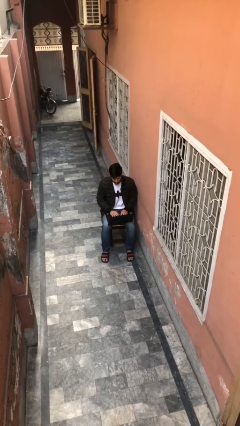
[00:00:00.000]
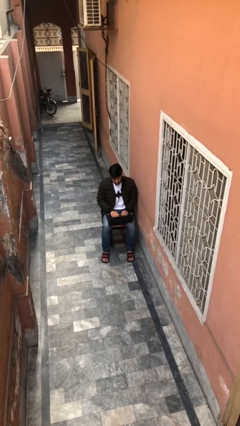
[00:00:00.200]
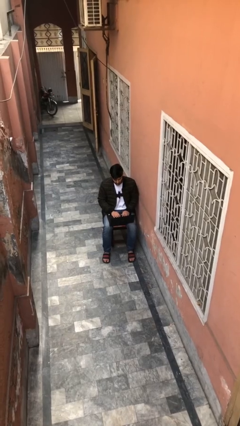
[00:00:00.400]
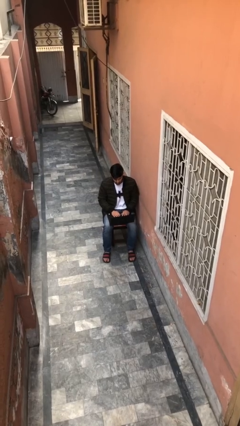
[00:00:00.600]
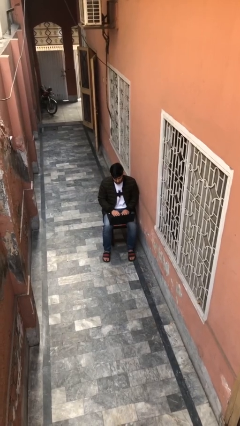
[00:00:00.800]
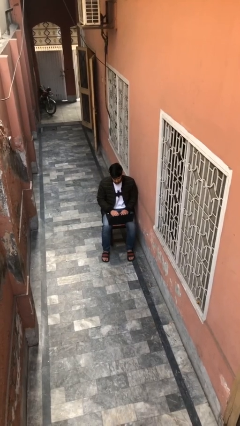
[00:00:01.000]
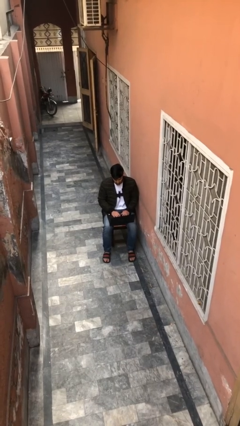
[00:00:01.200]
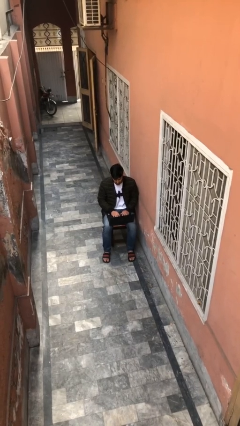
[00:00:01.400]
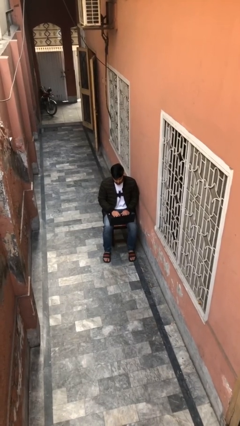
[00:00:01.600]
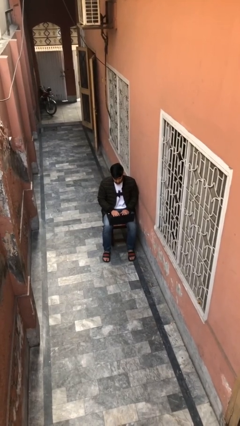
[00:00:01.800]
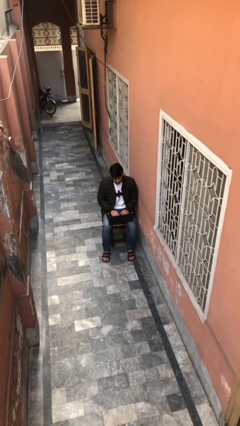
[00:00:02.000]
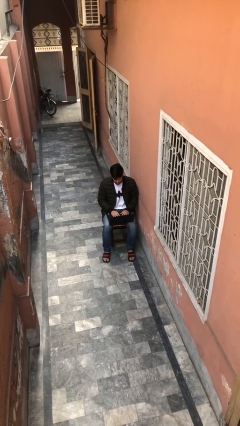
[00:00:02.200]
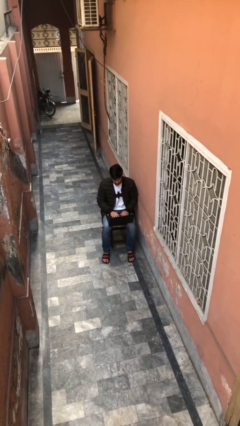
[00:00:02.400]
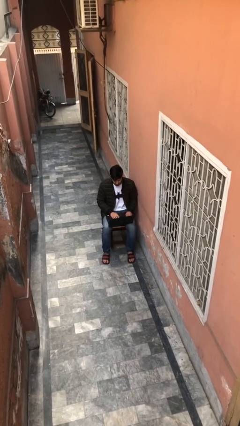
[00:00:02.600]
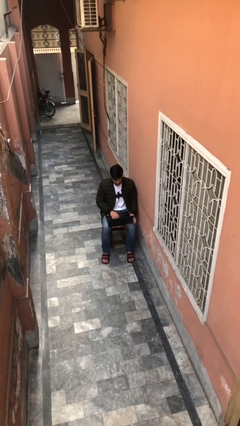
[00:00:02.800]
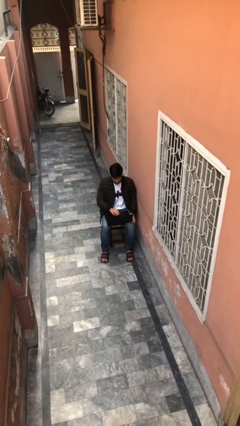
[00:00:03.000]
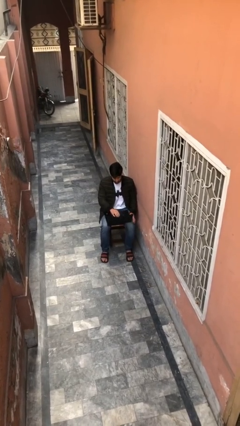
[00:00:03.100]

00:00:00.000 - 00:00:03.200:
person interacts with laptop

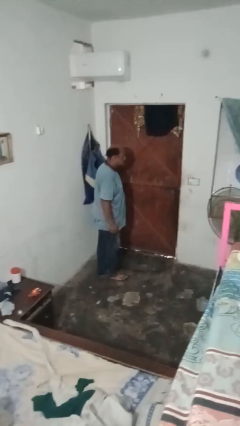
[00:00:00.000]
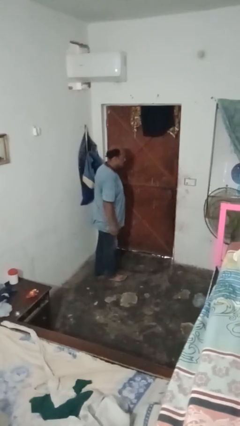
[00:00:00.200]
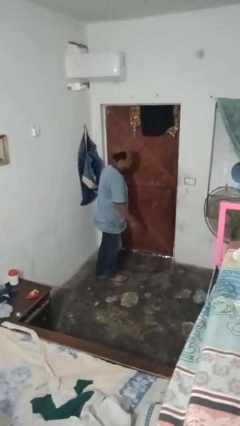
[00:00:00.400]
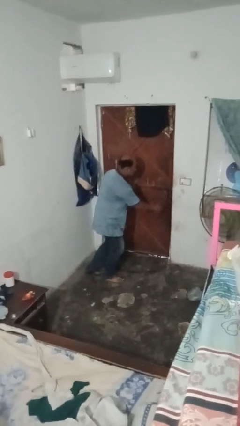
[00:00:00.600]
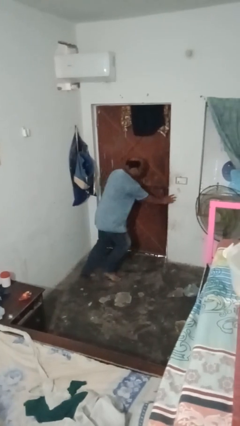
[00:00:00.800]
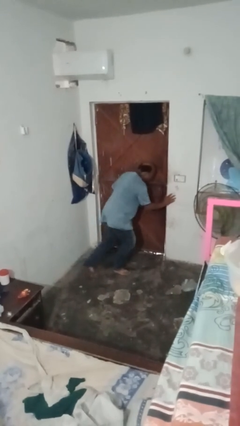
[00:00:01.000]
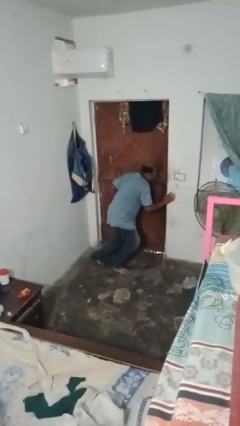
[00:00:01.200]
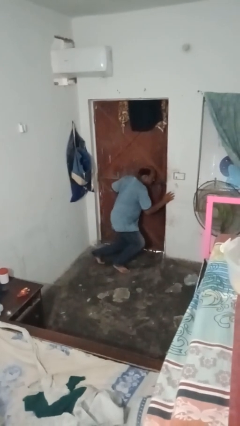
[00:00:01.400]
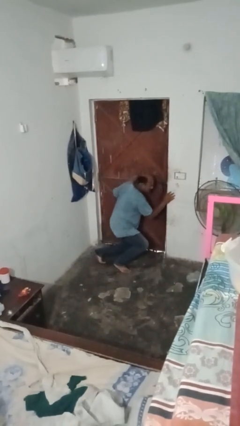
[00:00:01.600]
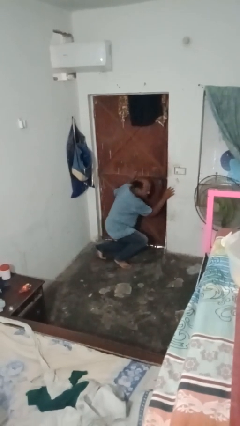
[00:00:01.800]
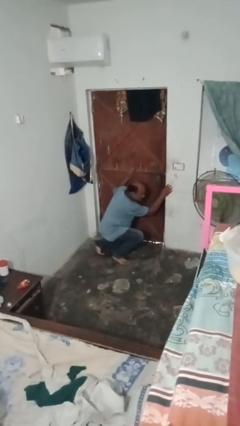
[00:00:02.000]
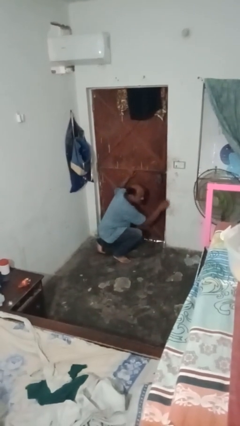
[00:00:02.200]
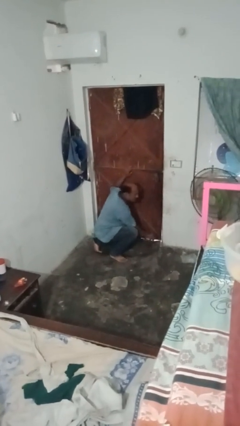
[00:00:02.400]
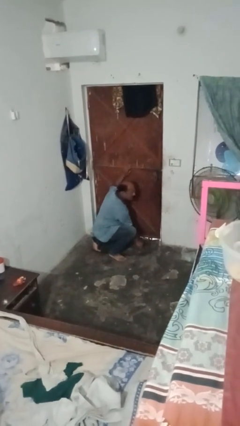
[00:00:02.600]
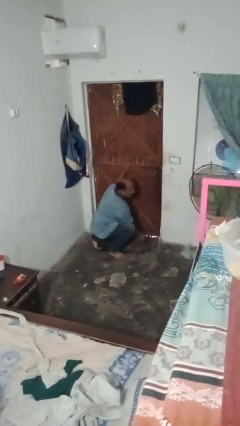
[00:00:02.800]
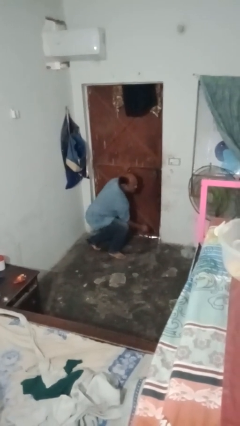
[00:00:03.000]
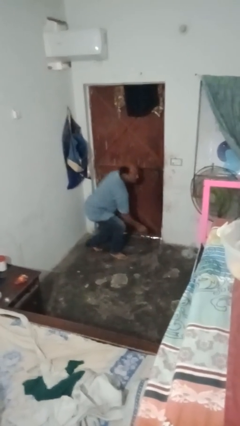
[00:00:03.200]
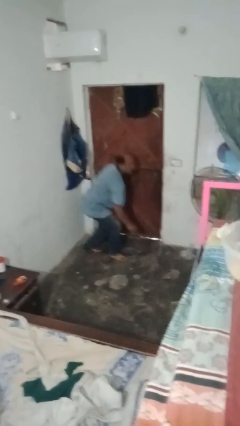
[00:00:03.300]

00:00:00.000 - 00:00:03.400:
person bumps into wall

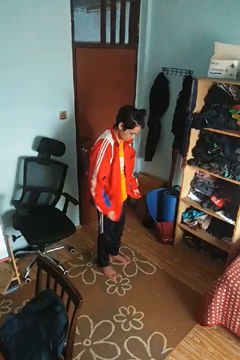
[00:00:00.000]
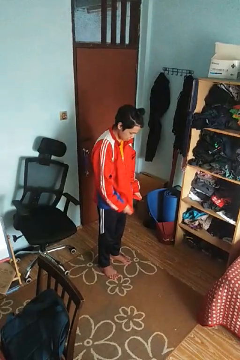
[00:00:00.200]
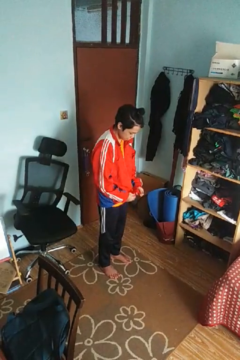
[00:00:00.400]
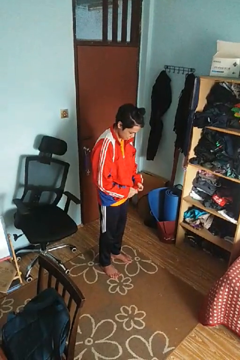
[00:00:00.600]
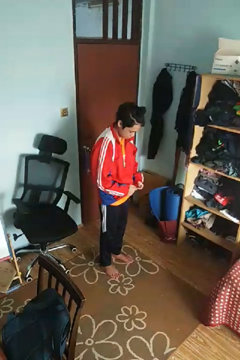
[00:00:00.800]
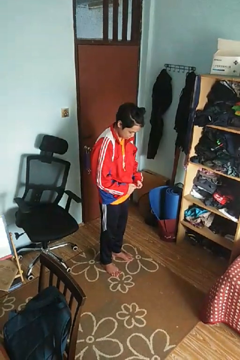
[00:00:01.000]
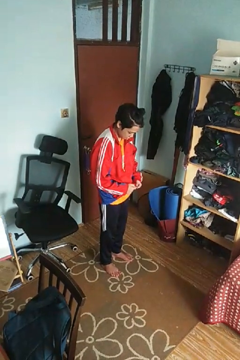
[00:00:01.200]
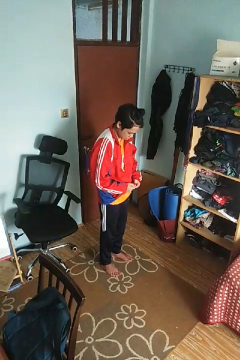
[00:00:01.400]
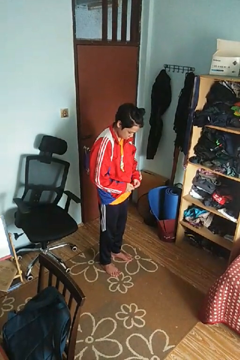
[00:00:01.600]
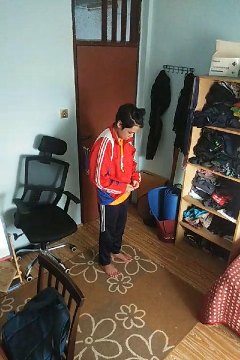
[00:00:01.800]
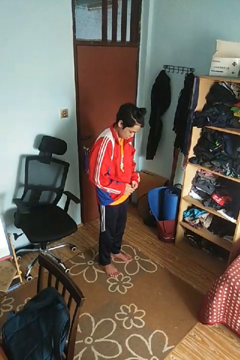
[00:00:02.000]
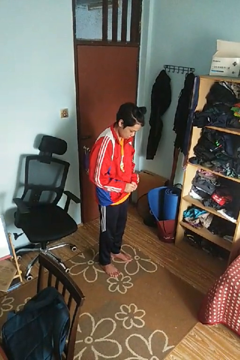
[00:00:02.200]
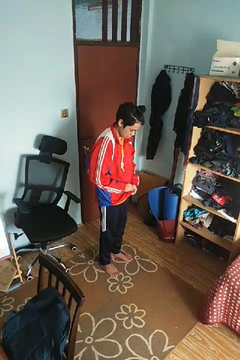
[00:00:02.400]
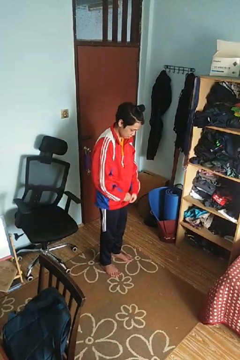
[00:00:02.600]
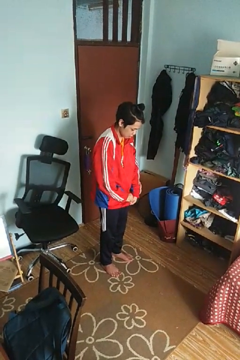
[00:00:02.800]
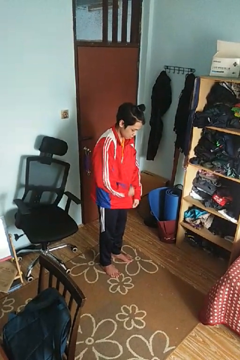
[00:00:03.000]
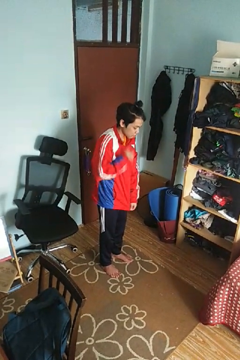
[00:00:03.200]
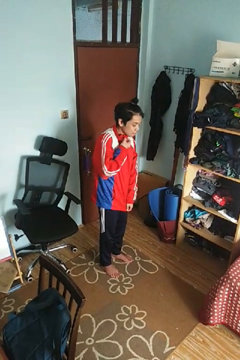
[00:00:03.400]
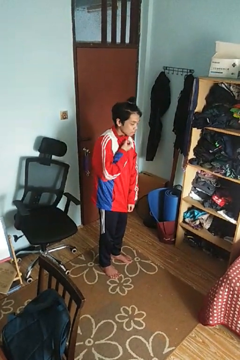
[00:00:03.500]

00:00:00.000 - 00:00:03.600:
person zips up jacket

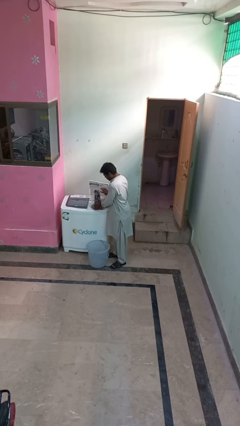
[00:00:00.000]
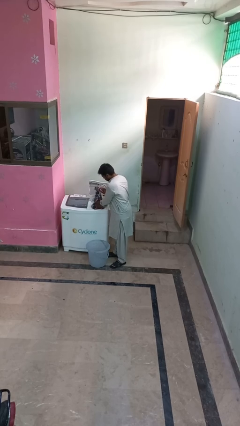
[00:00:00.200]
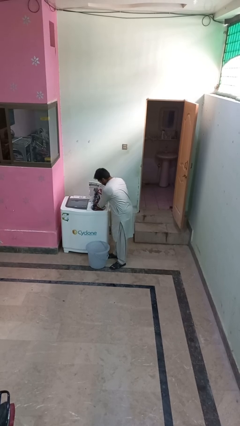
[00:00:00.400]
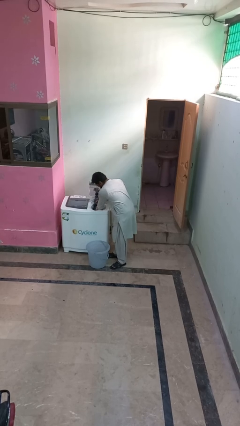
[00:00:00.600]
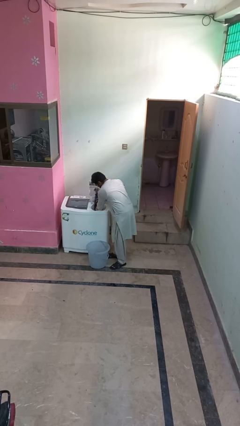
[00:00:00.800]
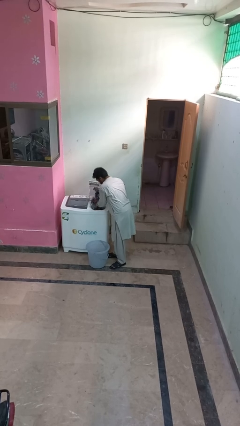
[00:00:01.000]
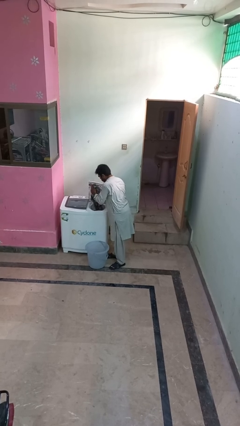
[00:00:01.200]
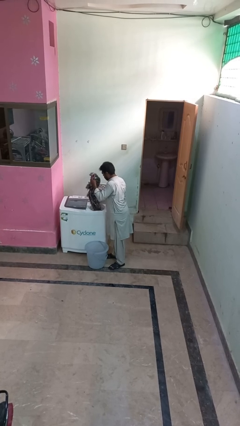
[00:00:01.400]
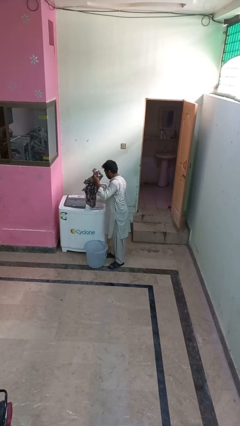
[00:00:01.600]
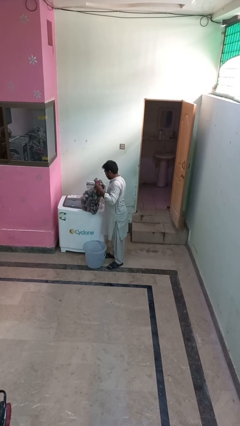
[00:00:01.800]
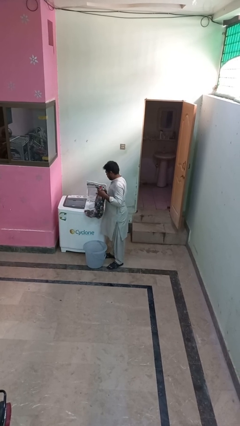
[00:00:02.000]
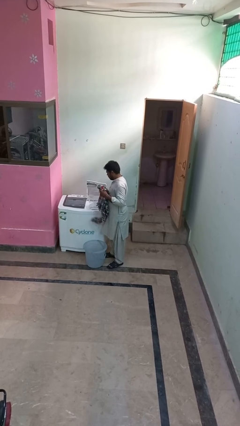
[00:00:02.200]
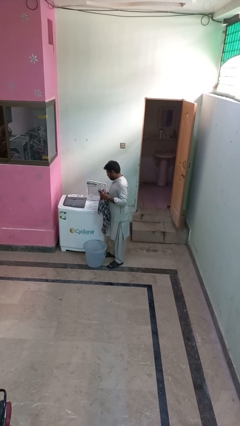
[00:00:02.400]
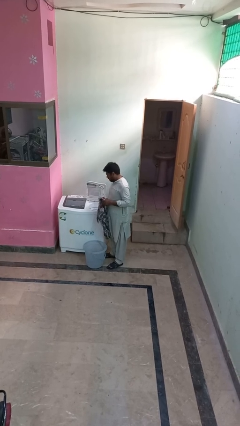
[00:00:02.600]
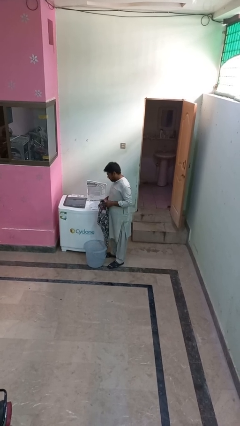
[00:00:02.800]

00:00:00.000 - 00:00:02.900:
person unloads dryer

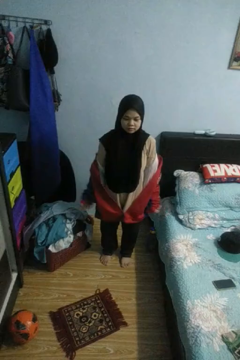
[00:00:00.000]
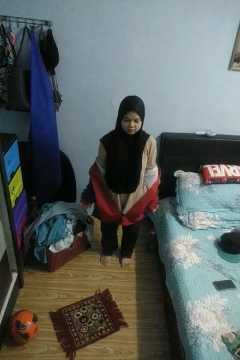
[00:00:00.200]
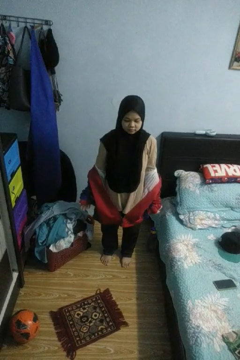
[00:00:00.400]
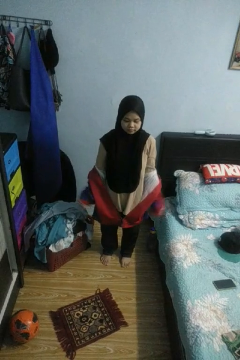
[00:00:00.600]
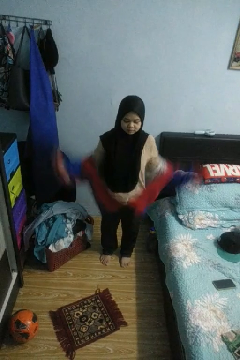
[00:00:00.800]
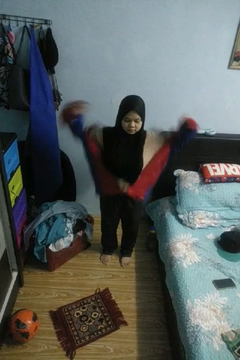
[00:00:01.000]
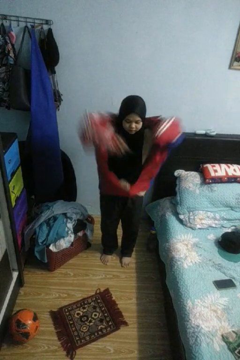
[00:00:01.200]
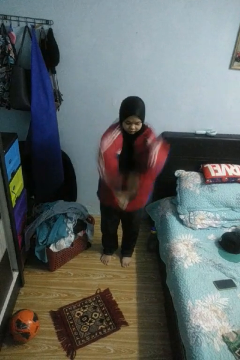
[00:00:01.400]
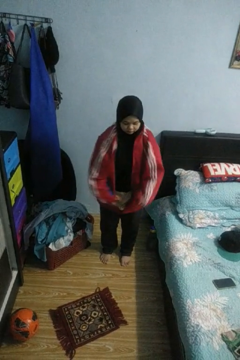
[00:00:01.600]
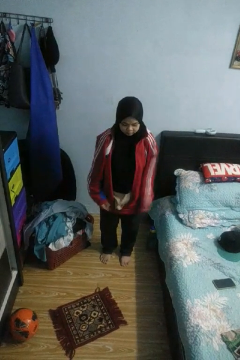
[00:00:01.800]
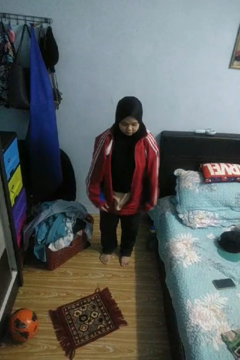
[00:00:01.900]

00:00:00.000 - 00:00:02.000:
person puts on jacket

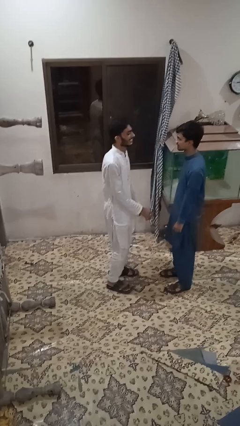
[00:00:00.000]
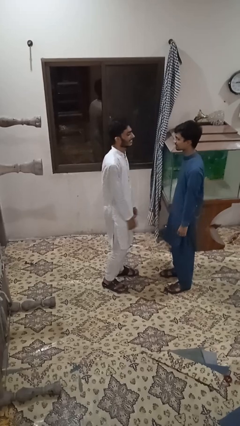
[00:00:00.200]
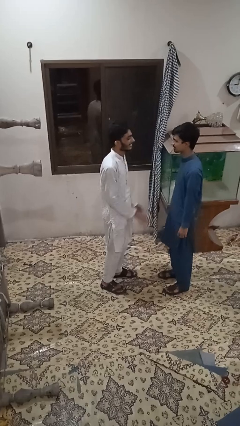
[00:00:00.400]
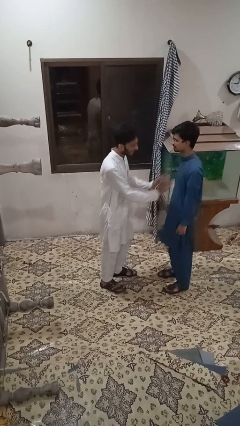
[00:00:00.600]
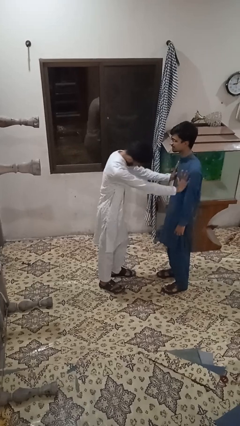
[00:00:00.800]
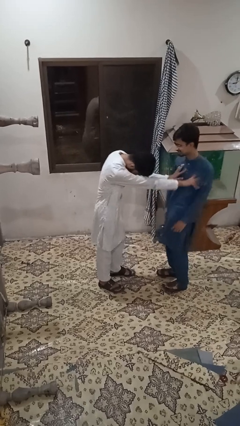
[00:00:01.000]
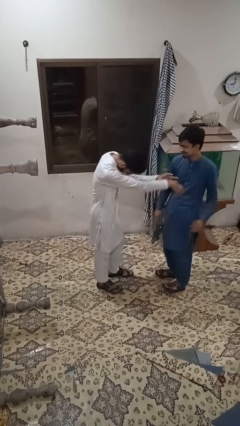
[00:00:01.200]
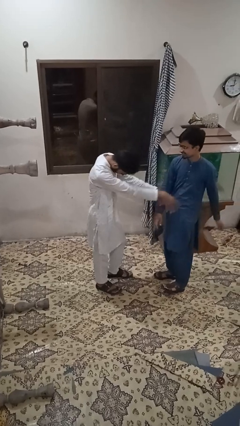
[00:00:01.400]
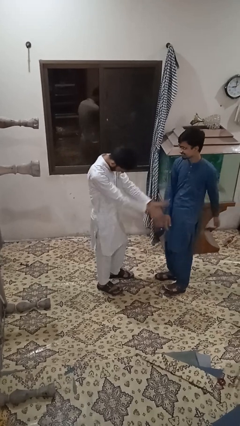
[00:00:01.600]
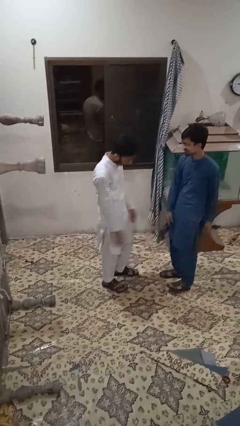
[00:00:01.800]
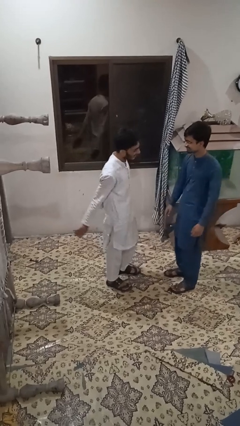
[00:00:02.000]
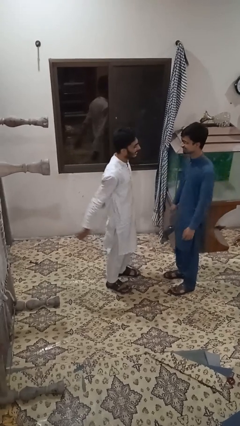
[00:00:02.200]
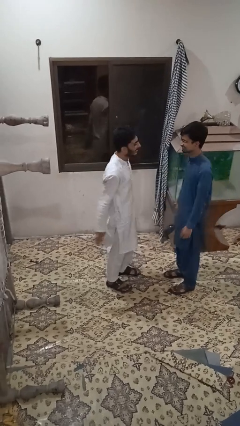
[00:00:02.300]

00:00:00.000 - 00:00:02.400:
person shoves person

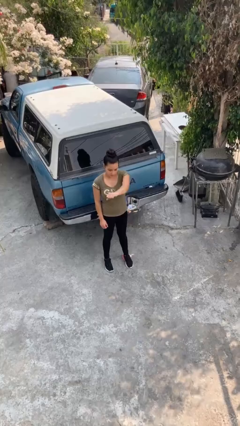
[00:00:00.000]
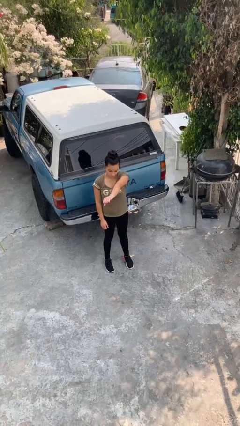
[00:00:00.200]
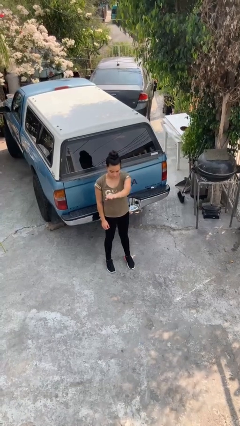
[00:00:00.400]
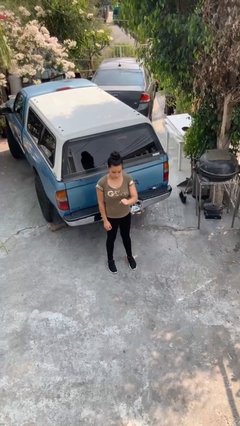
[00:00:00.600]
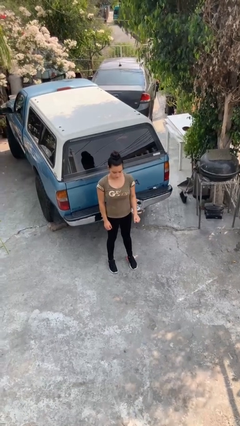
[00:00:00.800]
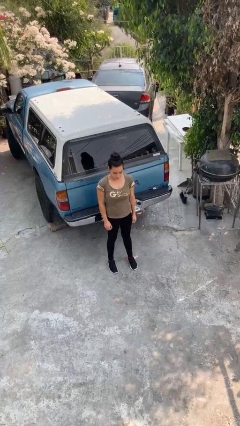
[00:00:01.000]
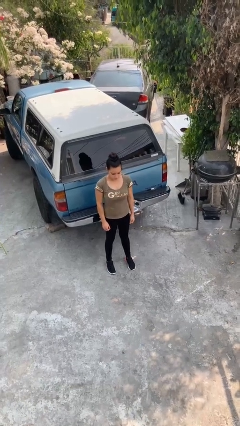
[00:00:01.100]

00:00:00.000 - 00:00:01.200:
person punches
